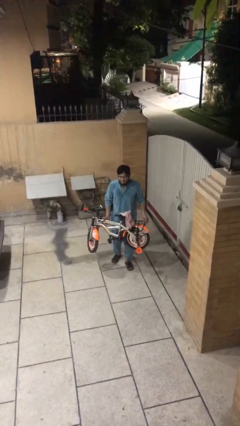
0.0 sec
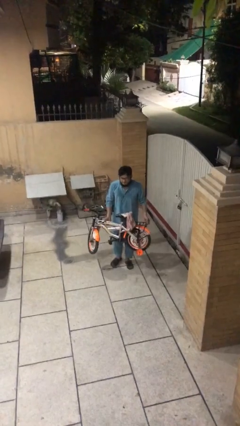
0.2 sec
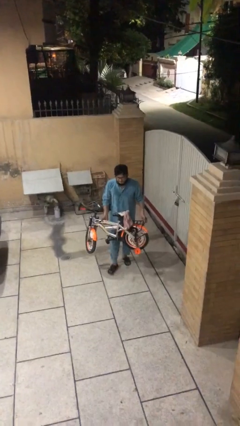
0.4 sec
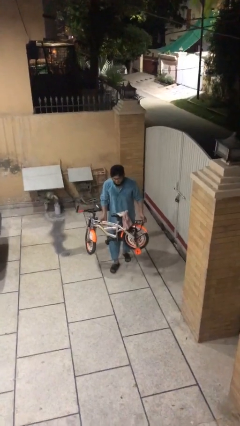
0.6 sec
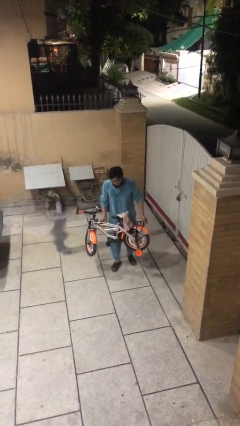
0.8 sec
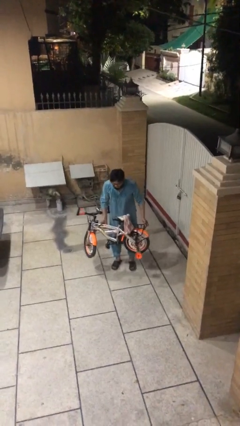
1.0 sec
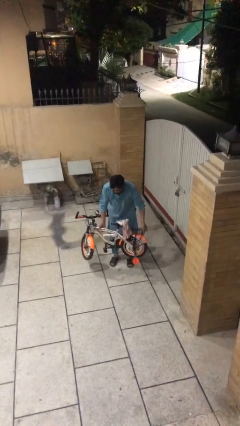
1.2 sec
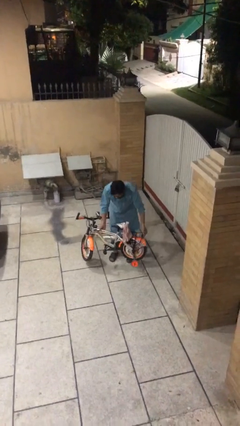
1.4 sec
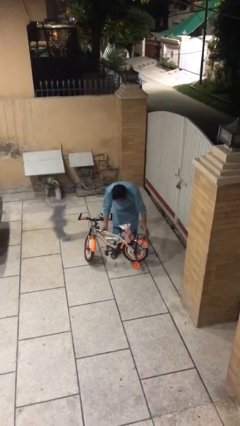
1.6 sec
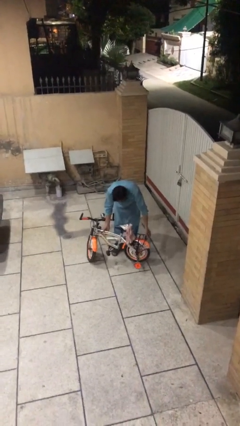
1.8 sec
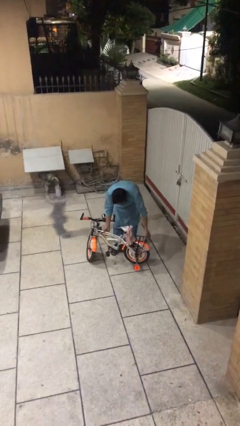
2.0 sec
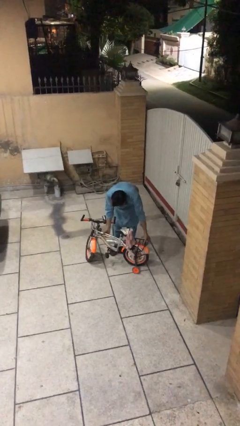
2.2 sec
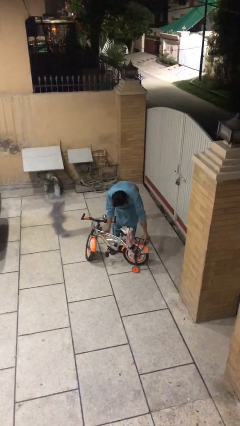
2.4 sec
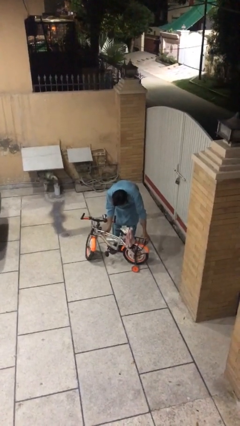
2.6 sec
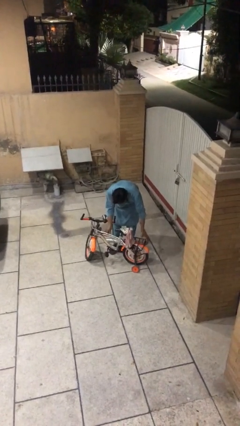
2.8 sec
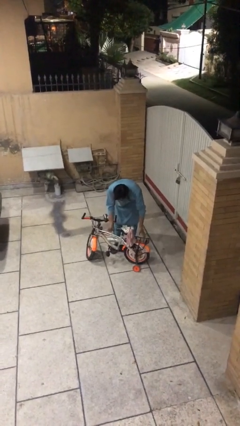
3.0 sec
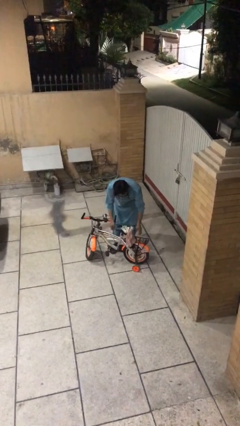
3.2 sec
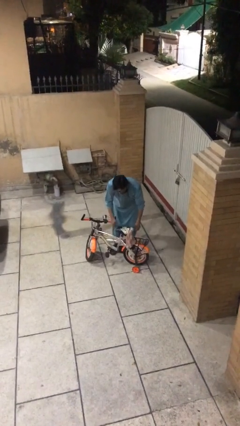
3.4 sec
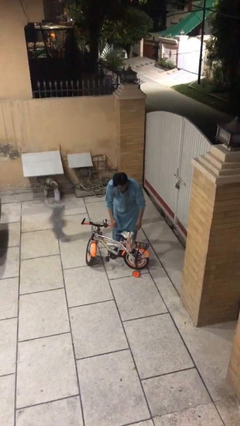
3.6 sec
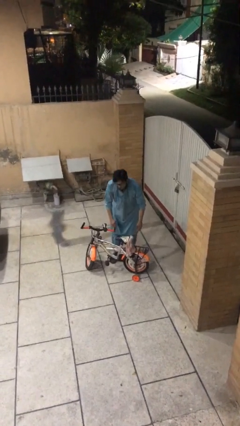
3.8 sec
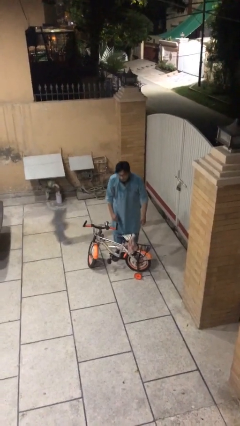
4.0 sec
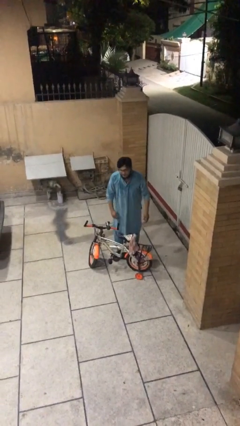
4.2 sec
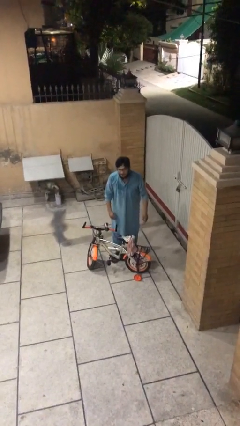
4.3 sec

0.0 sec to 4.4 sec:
person puts down object on floor

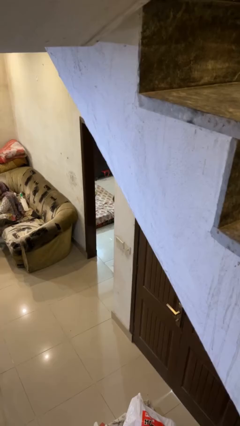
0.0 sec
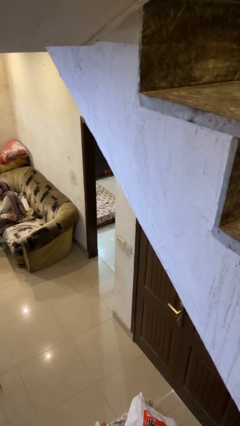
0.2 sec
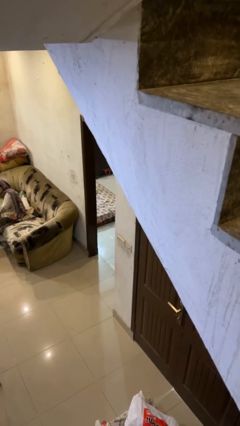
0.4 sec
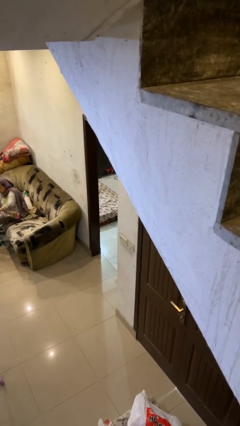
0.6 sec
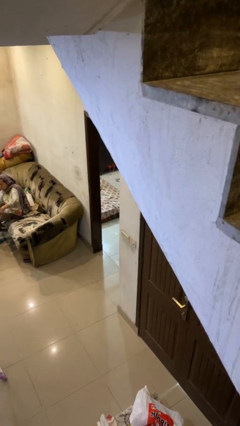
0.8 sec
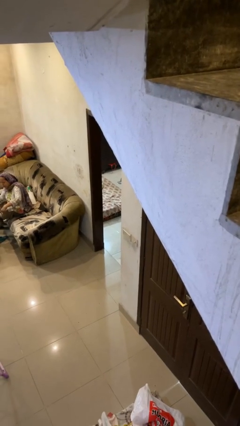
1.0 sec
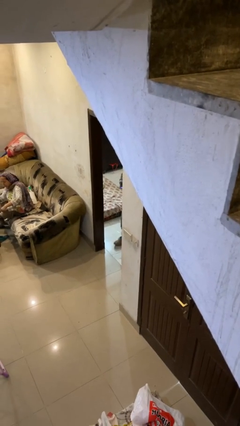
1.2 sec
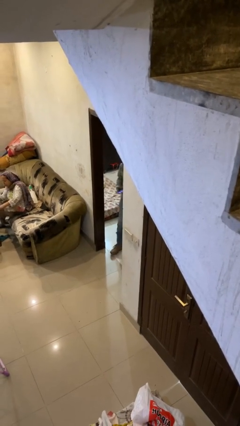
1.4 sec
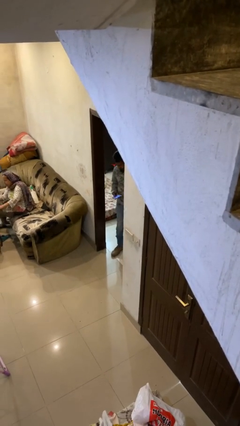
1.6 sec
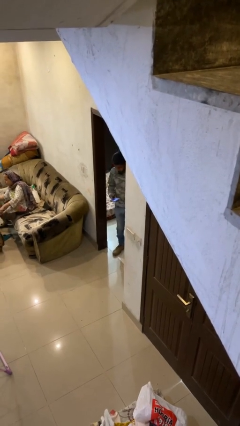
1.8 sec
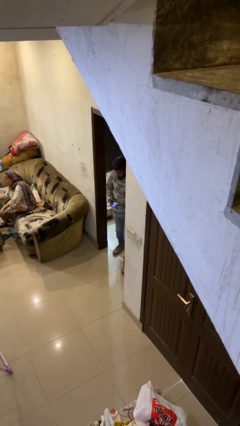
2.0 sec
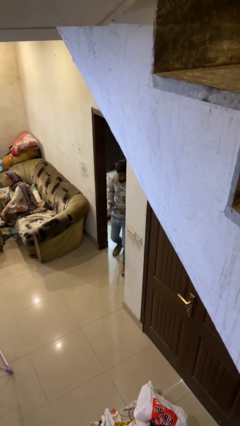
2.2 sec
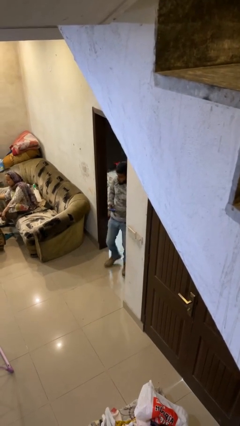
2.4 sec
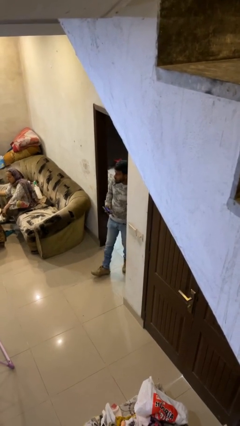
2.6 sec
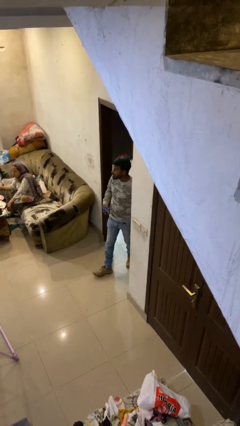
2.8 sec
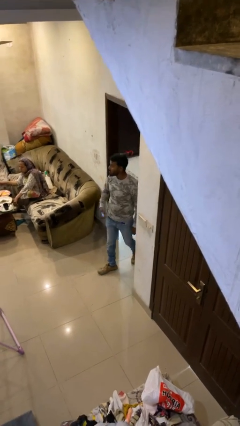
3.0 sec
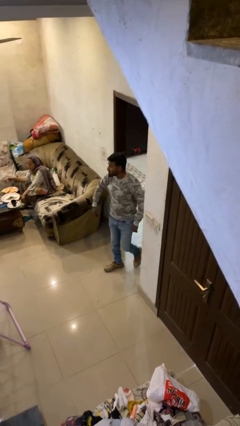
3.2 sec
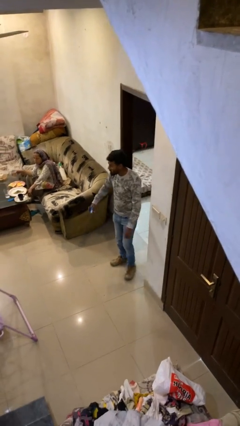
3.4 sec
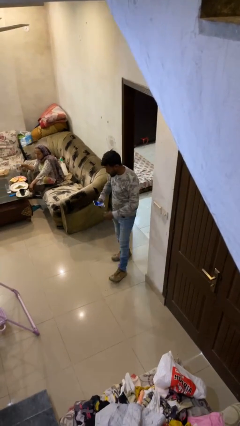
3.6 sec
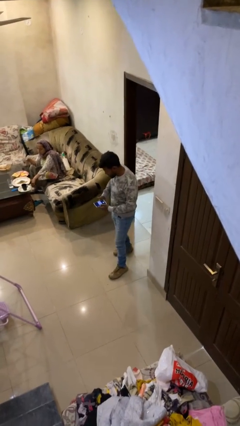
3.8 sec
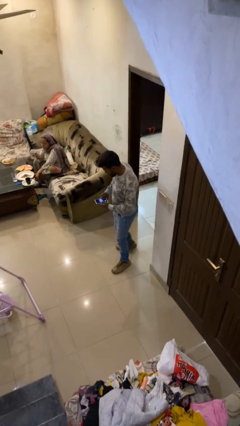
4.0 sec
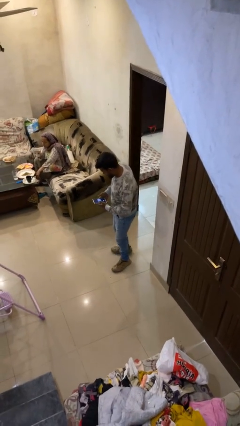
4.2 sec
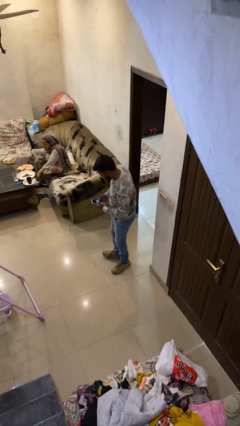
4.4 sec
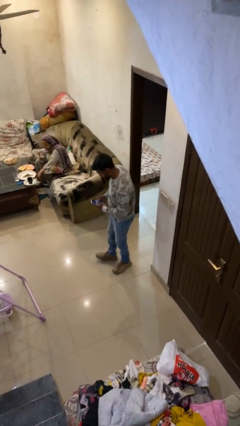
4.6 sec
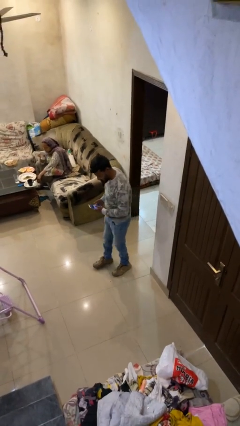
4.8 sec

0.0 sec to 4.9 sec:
person enters scene through structure

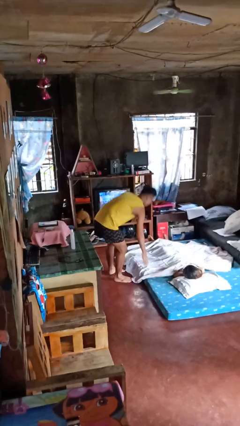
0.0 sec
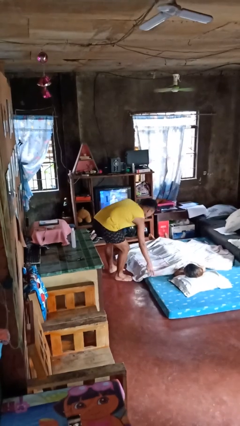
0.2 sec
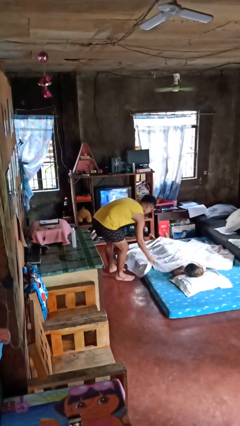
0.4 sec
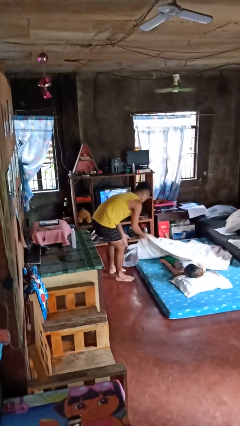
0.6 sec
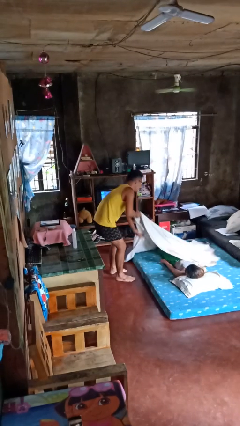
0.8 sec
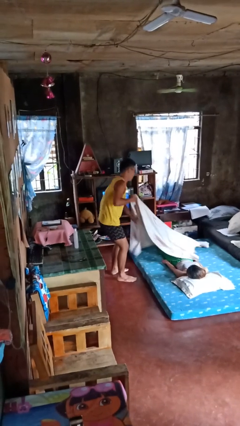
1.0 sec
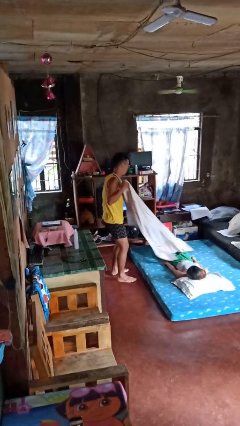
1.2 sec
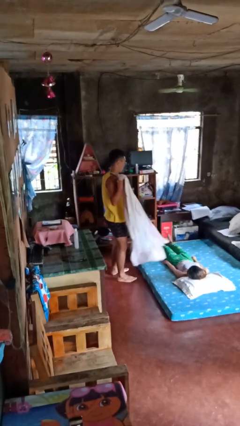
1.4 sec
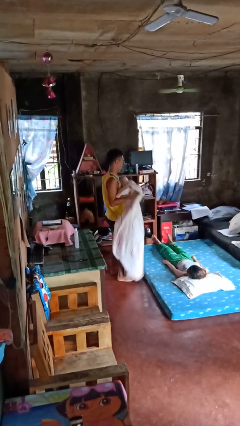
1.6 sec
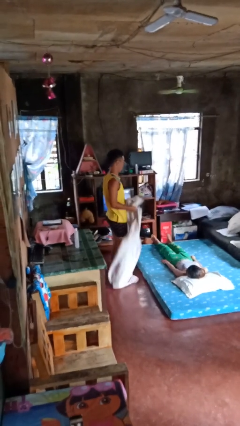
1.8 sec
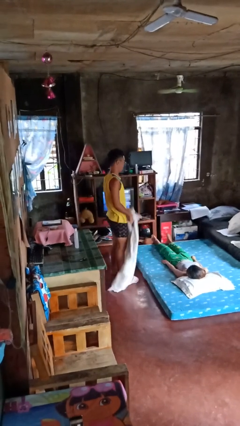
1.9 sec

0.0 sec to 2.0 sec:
person uncovers friend with blanket

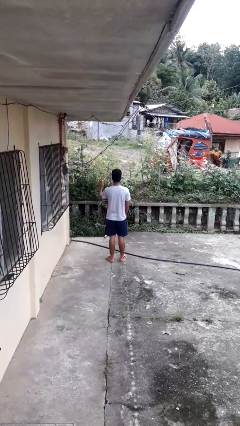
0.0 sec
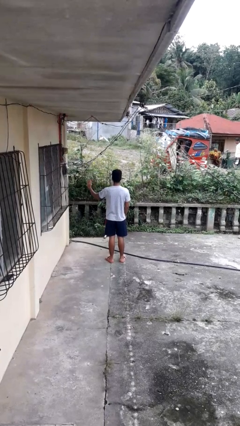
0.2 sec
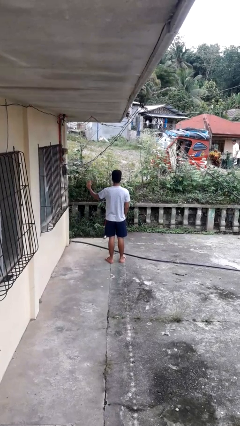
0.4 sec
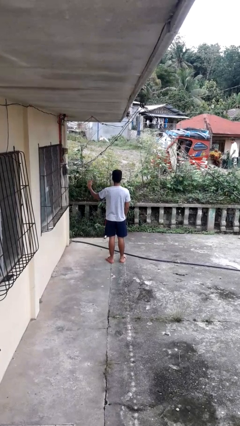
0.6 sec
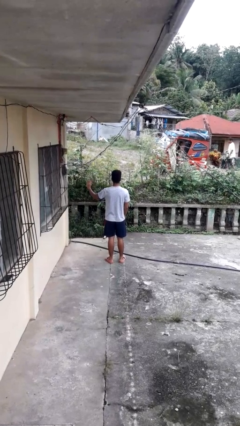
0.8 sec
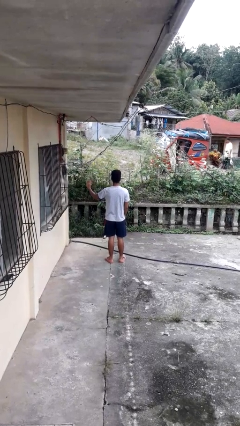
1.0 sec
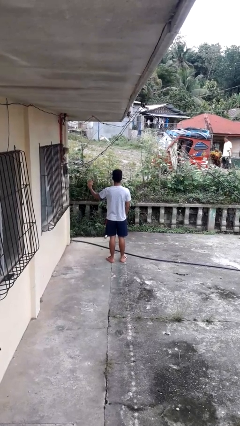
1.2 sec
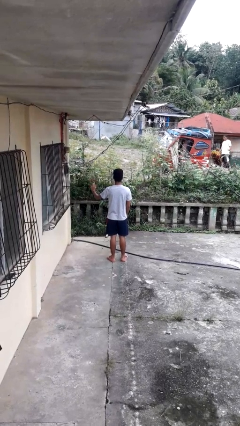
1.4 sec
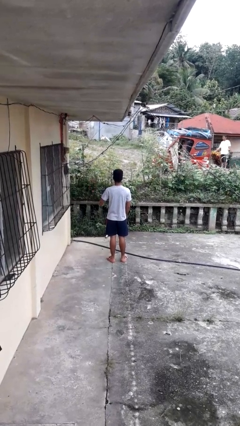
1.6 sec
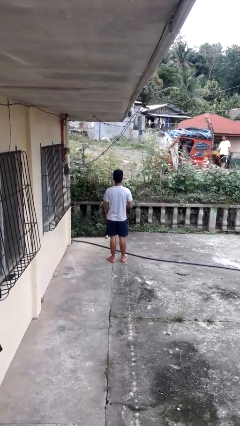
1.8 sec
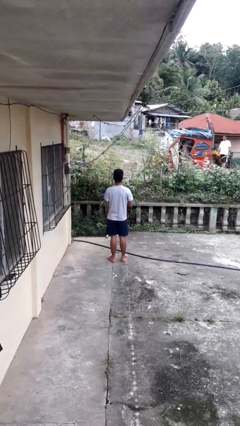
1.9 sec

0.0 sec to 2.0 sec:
person gestures swipe left

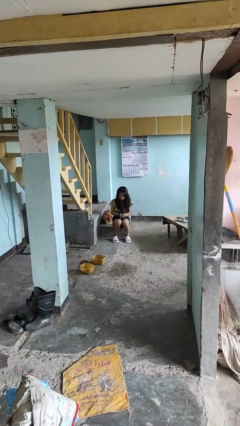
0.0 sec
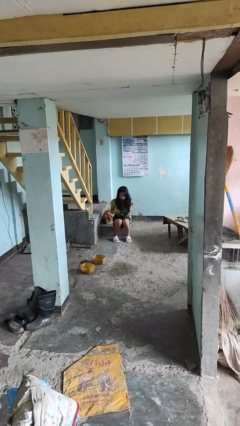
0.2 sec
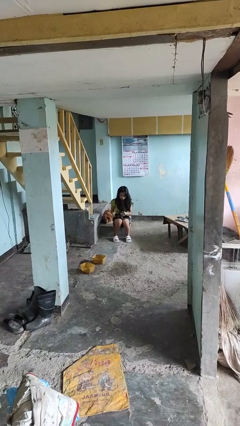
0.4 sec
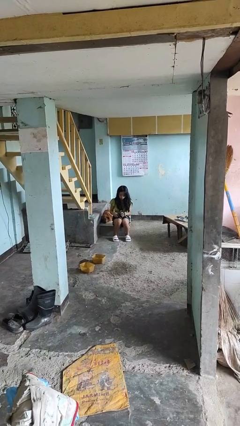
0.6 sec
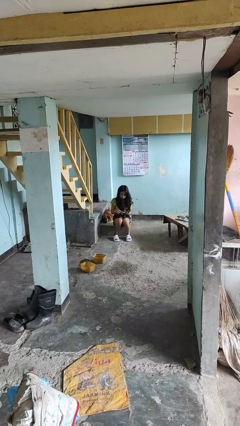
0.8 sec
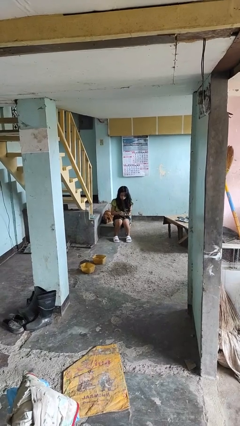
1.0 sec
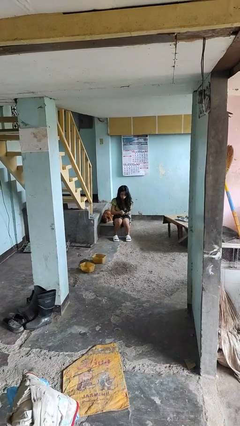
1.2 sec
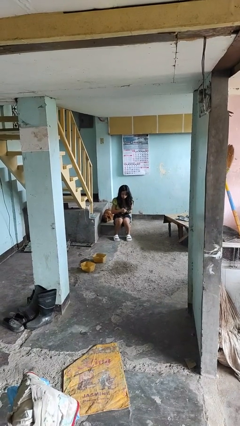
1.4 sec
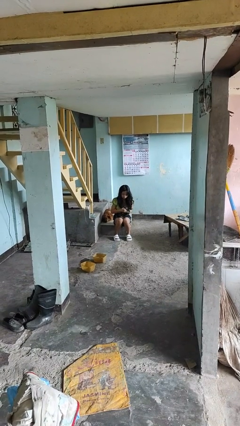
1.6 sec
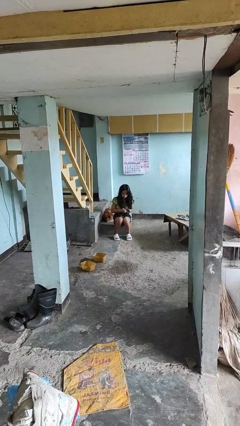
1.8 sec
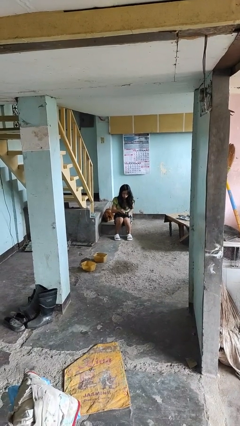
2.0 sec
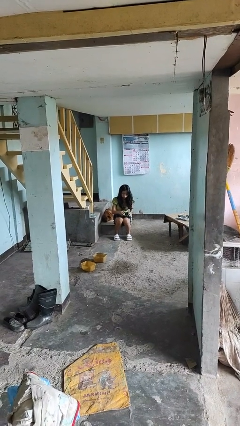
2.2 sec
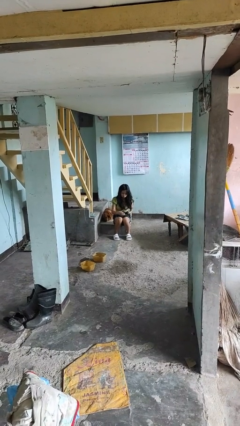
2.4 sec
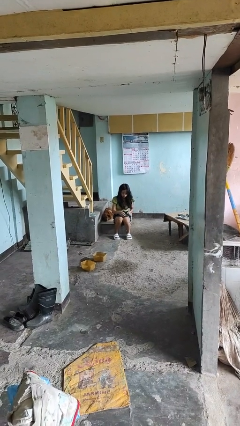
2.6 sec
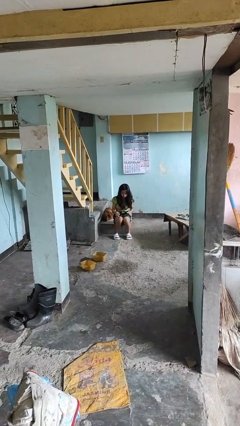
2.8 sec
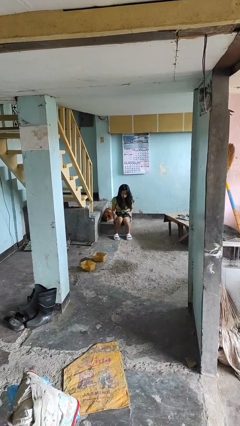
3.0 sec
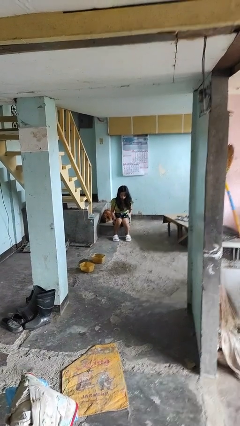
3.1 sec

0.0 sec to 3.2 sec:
person takes off gloves

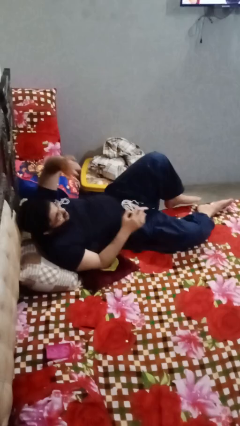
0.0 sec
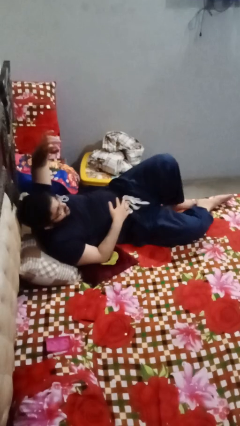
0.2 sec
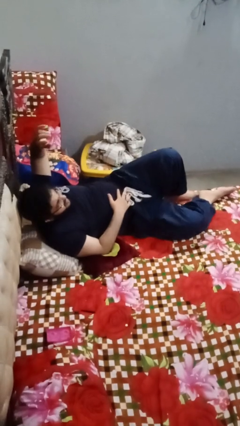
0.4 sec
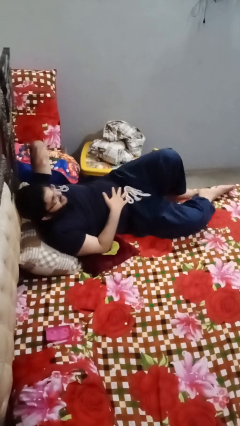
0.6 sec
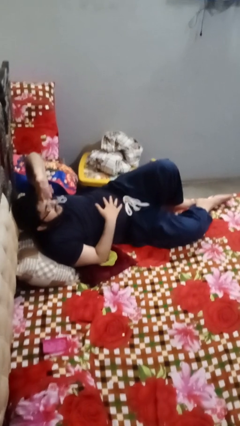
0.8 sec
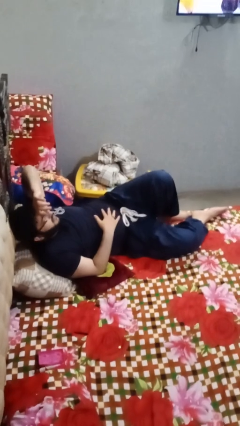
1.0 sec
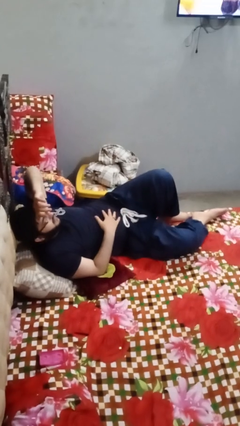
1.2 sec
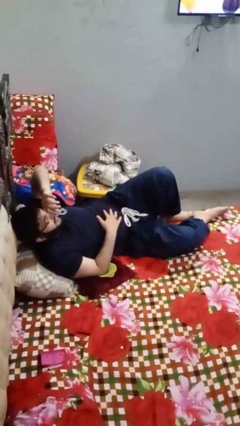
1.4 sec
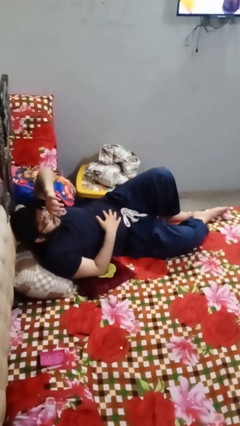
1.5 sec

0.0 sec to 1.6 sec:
person lies down on bed
